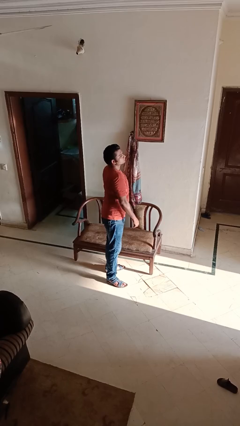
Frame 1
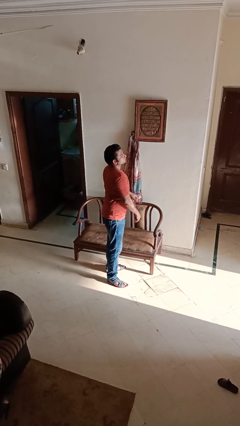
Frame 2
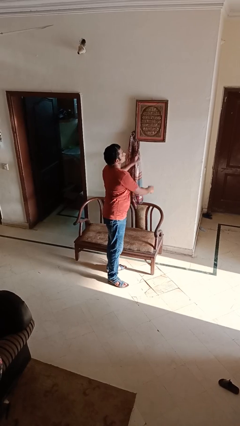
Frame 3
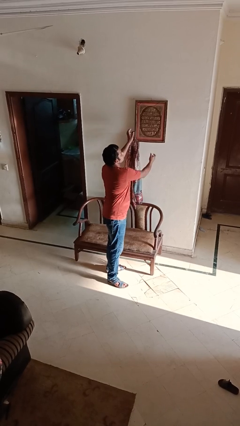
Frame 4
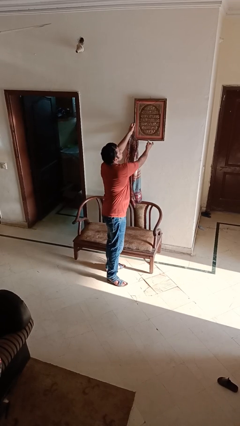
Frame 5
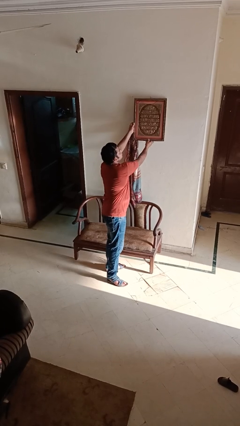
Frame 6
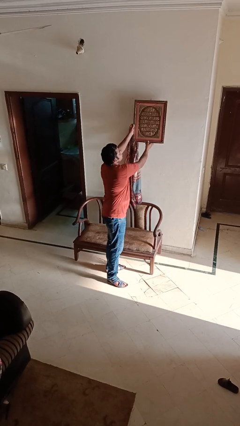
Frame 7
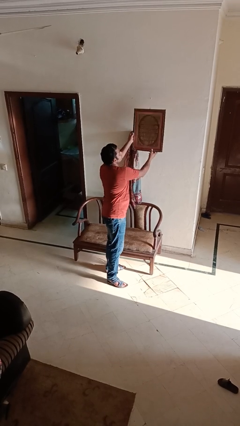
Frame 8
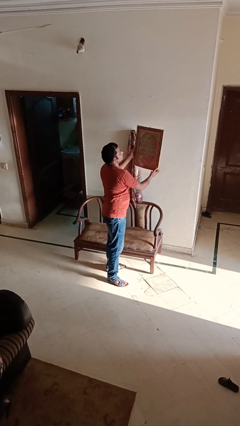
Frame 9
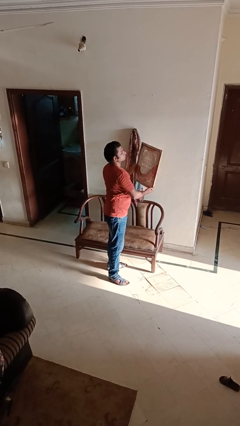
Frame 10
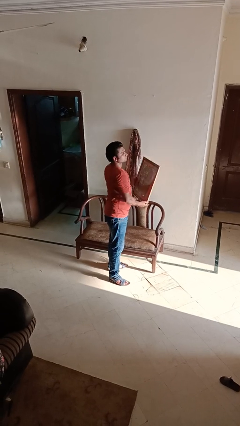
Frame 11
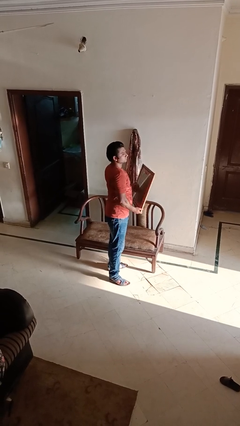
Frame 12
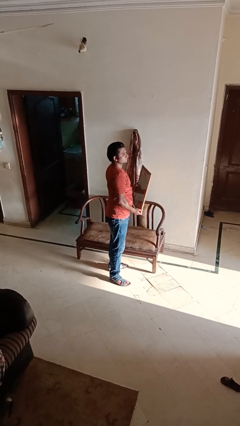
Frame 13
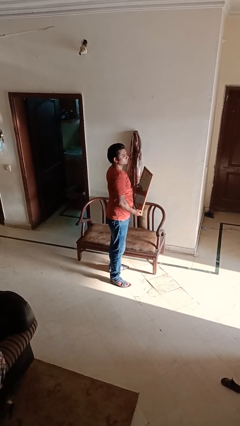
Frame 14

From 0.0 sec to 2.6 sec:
person takes down picture frame

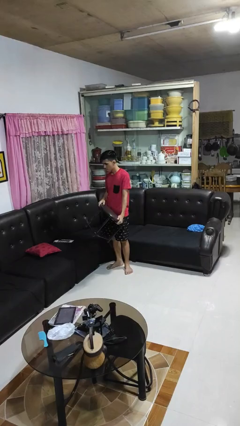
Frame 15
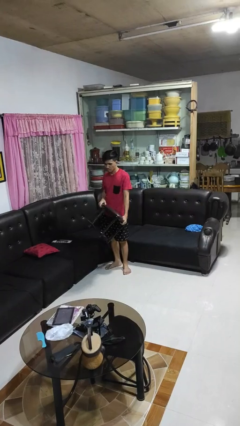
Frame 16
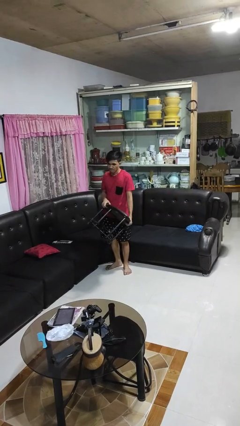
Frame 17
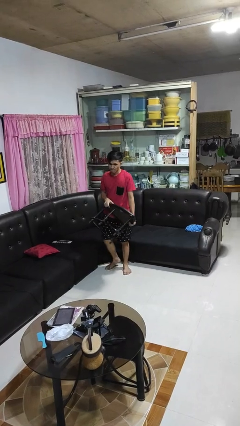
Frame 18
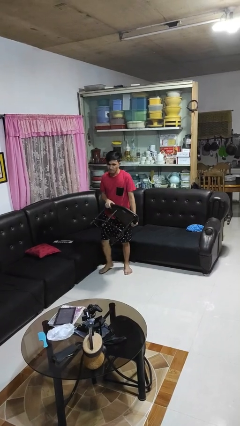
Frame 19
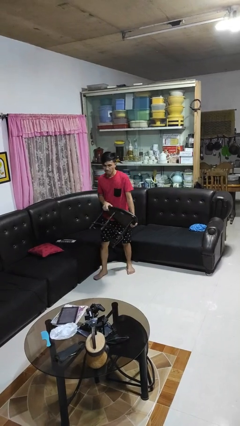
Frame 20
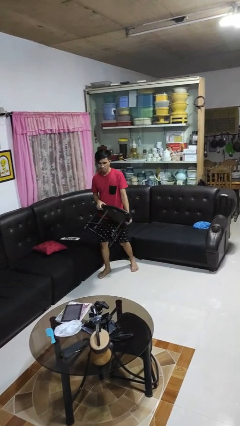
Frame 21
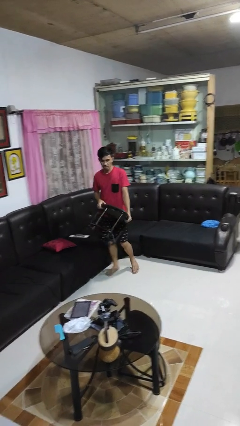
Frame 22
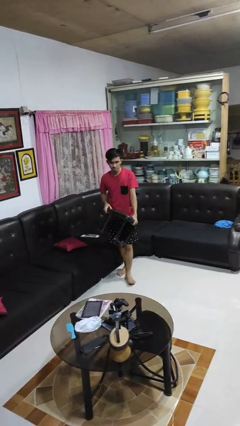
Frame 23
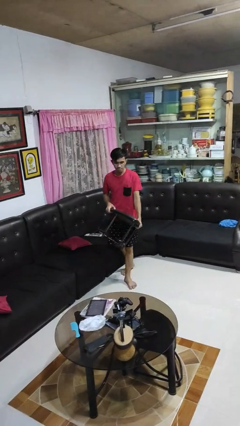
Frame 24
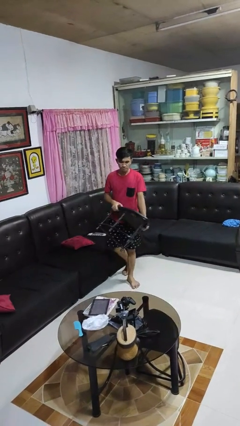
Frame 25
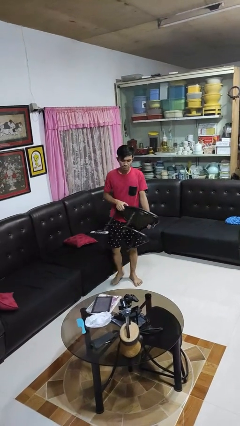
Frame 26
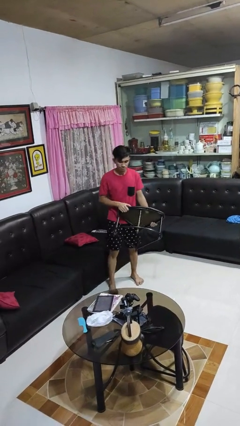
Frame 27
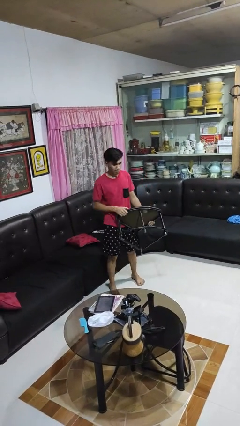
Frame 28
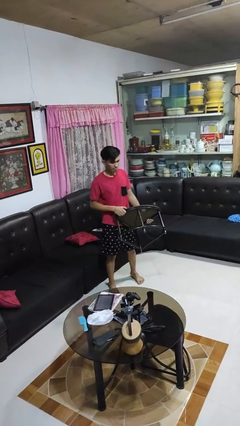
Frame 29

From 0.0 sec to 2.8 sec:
person carries furniture

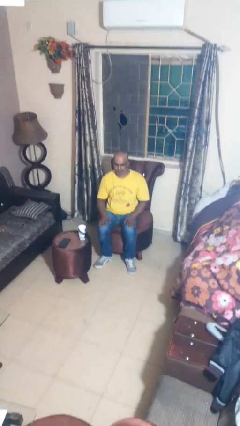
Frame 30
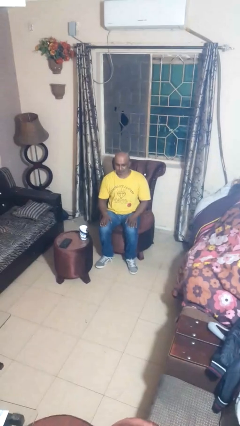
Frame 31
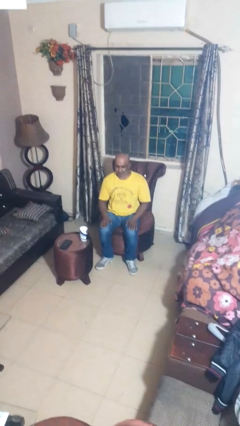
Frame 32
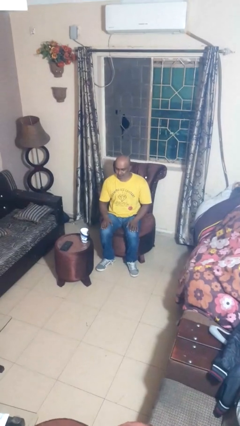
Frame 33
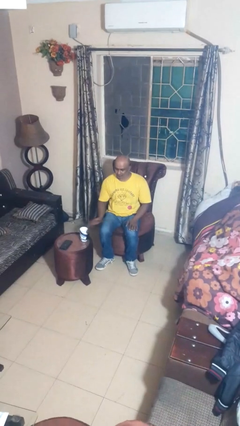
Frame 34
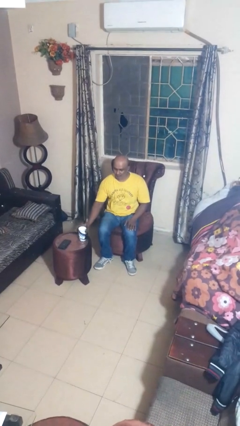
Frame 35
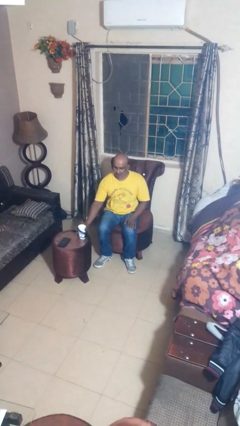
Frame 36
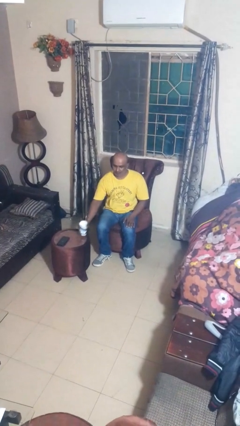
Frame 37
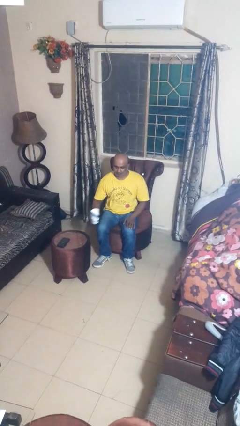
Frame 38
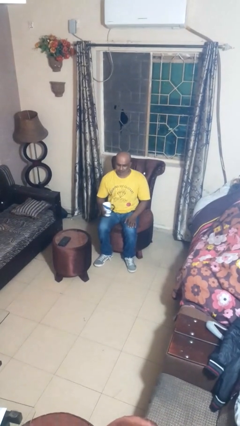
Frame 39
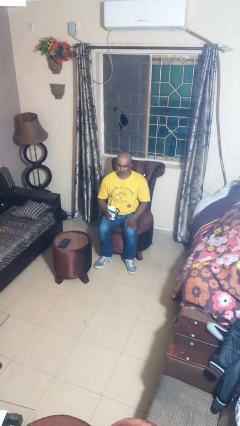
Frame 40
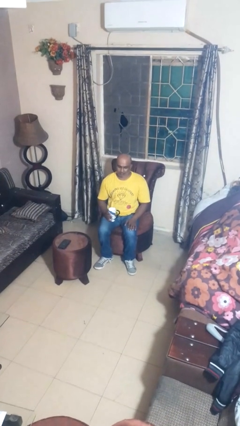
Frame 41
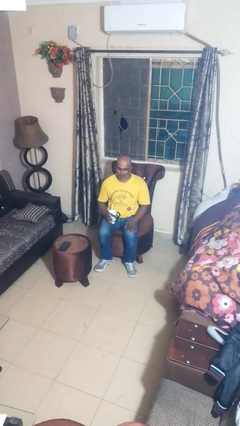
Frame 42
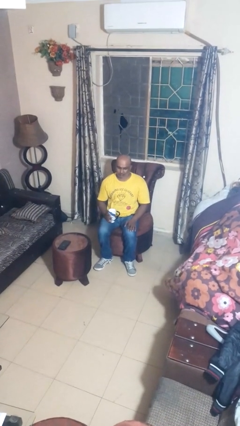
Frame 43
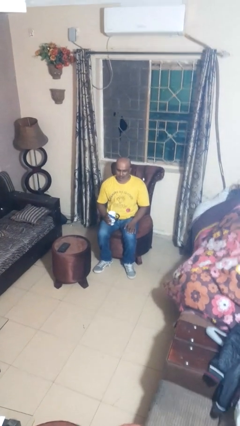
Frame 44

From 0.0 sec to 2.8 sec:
person picks up object from table

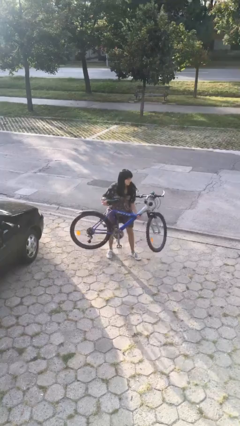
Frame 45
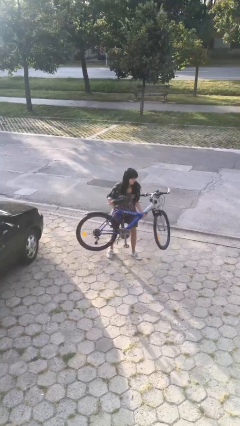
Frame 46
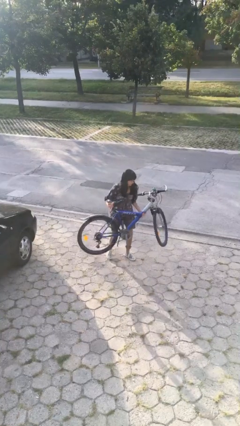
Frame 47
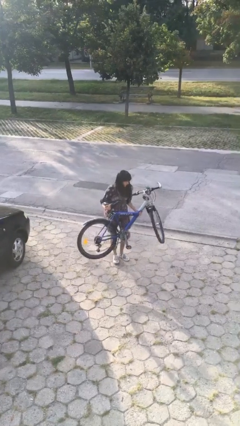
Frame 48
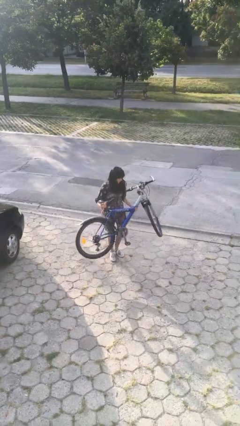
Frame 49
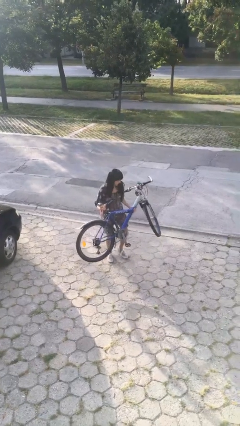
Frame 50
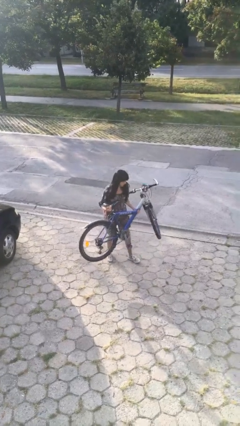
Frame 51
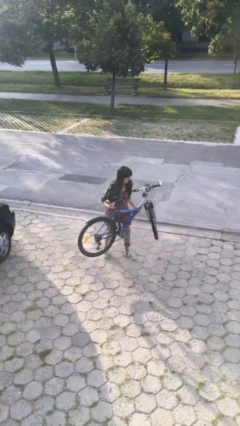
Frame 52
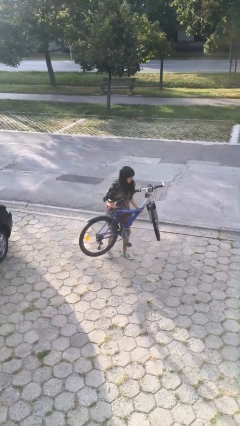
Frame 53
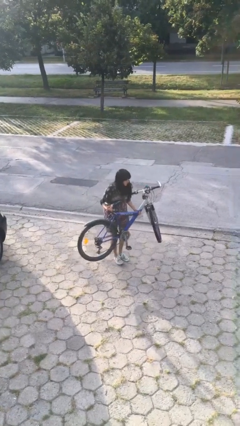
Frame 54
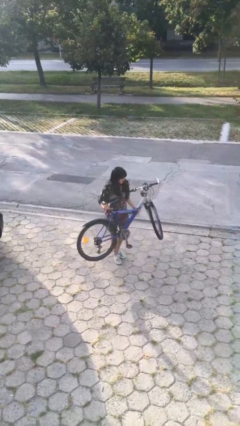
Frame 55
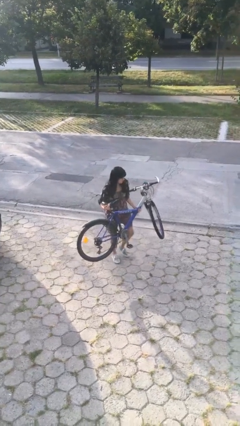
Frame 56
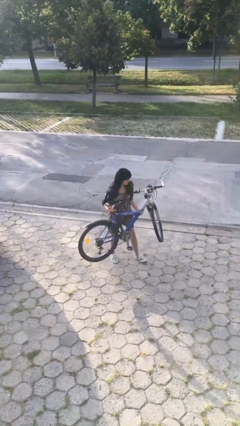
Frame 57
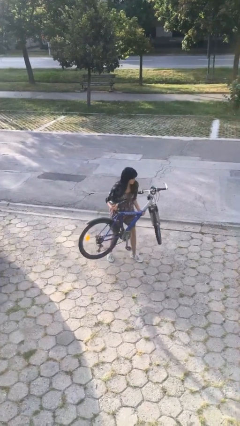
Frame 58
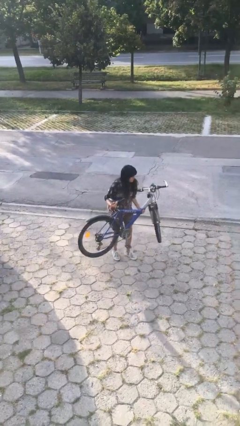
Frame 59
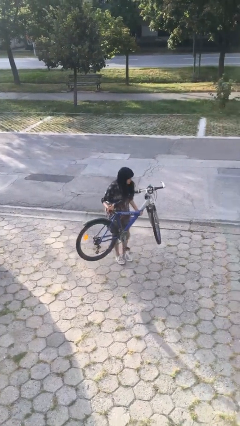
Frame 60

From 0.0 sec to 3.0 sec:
person carries heavy object

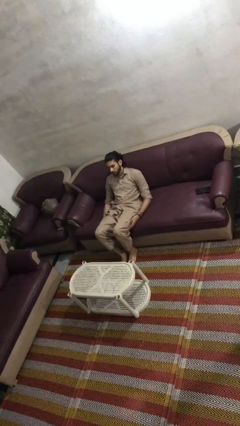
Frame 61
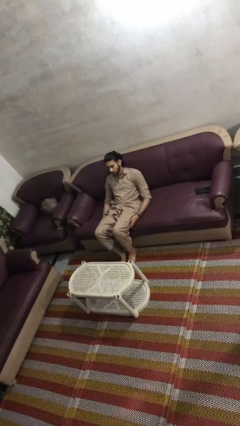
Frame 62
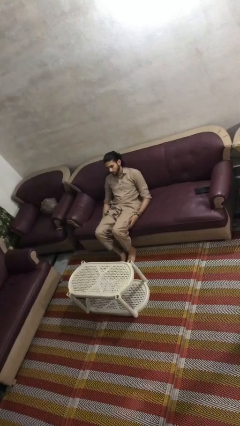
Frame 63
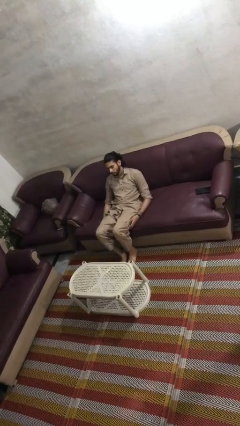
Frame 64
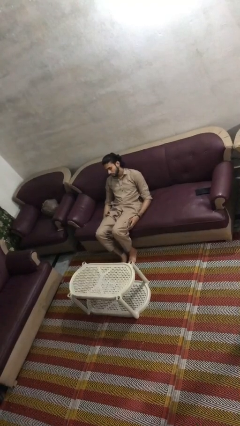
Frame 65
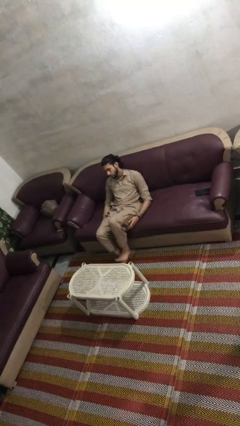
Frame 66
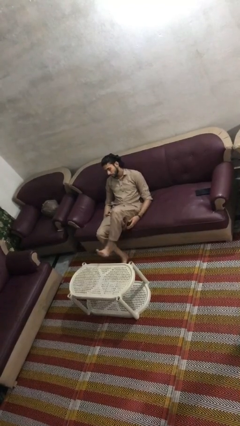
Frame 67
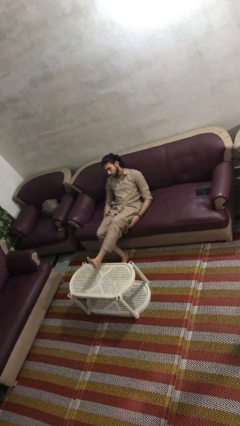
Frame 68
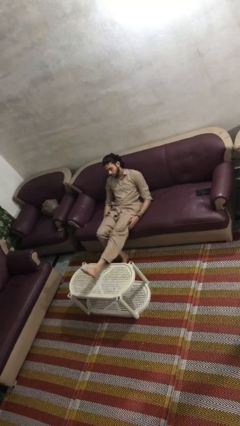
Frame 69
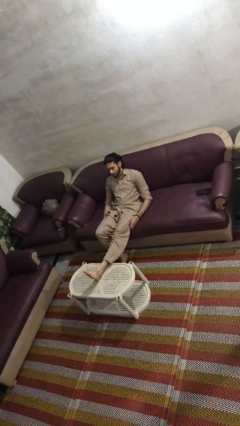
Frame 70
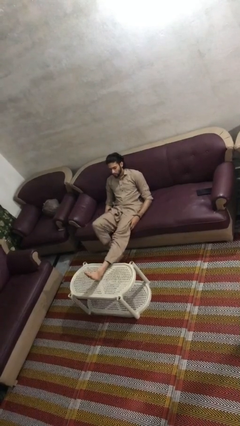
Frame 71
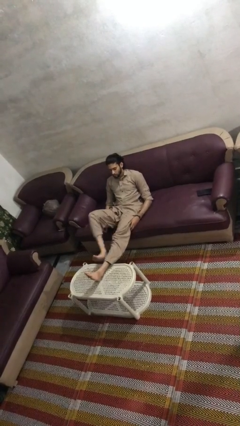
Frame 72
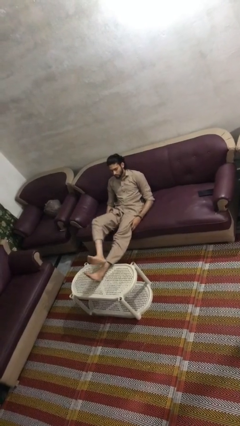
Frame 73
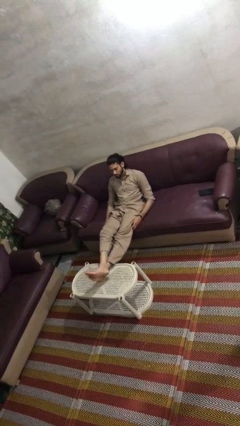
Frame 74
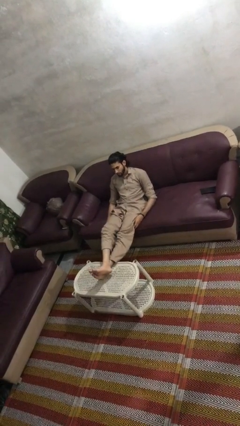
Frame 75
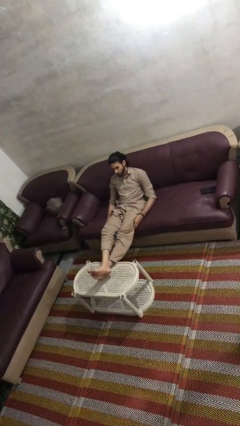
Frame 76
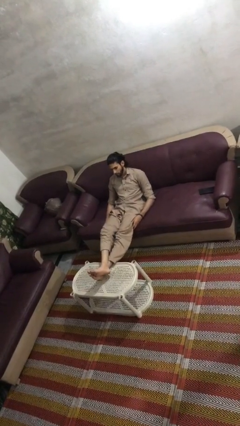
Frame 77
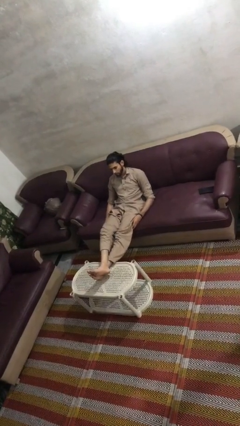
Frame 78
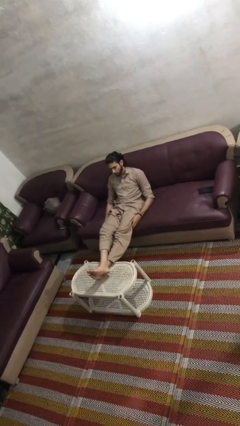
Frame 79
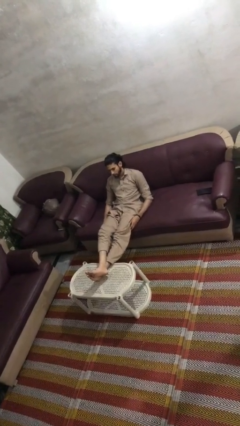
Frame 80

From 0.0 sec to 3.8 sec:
person puts feet up

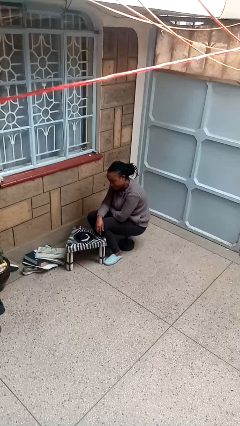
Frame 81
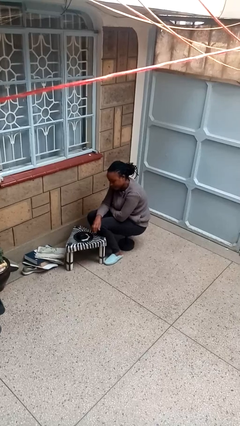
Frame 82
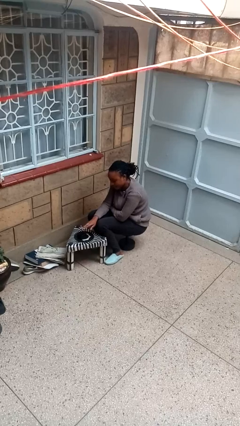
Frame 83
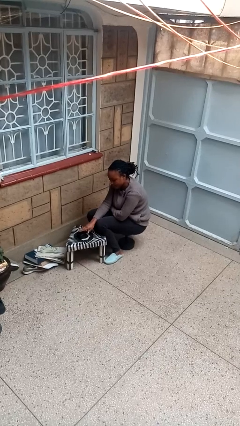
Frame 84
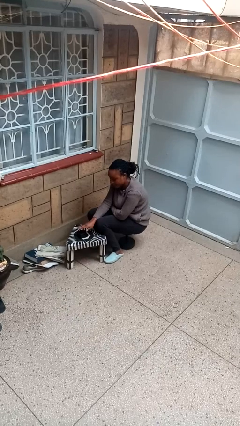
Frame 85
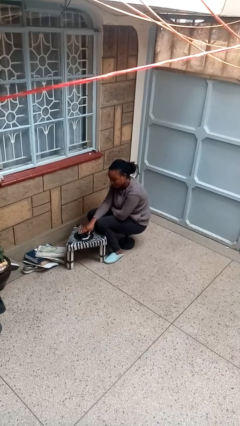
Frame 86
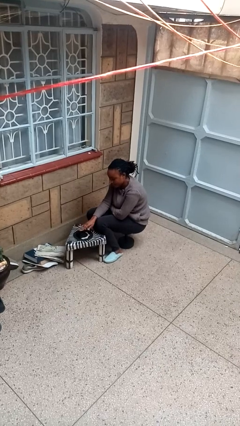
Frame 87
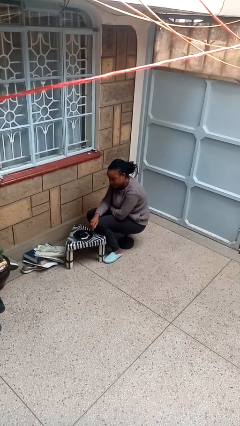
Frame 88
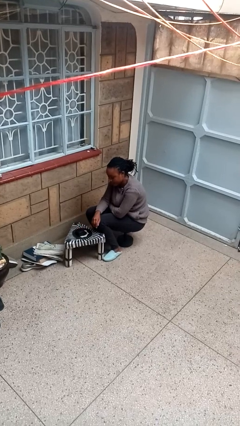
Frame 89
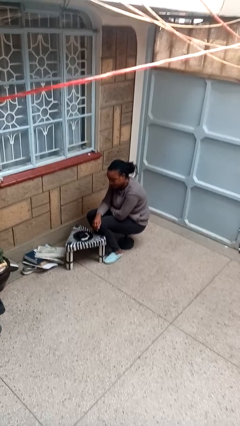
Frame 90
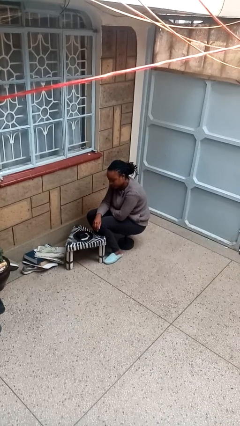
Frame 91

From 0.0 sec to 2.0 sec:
person taps object with finger

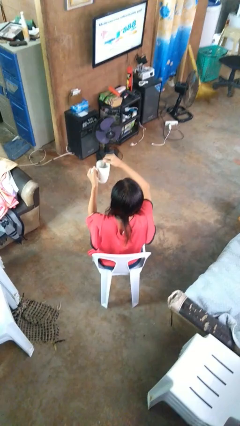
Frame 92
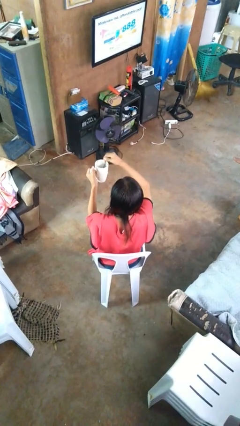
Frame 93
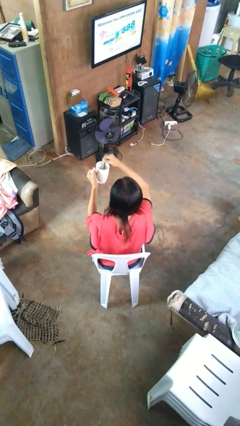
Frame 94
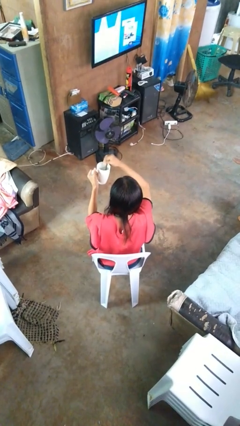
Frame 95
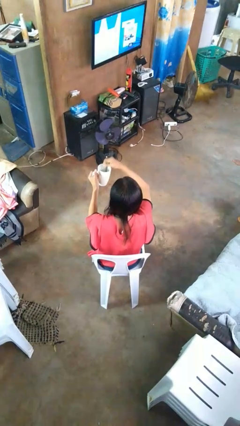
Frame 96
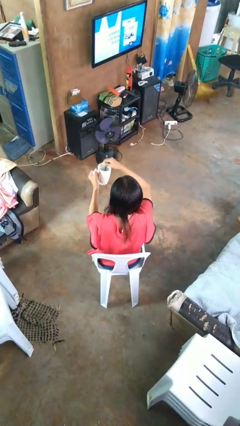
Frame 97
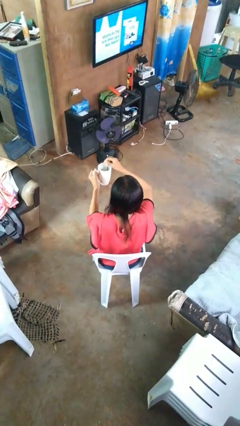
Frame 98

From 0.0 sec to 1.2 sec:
person stirs mug
